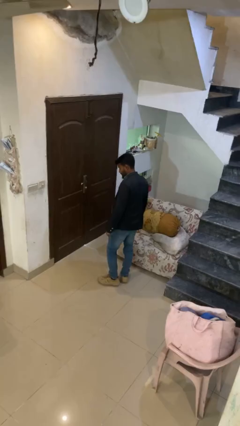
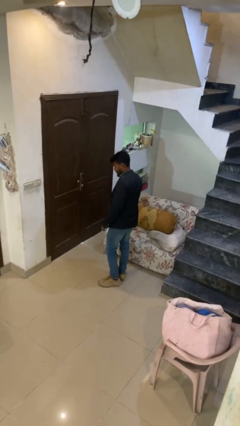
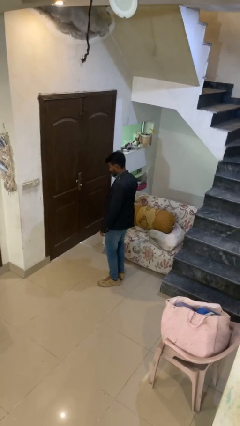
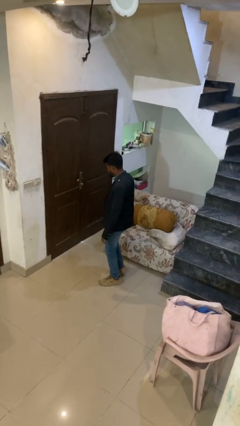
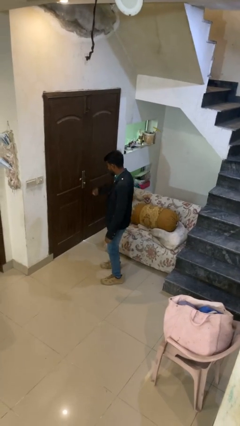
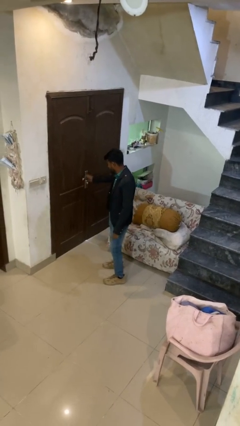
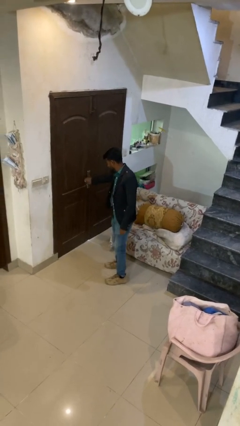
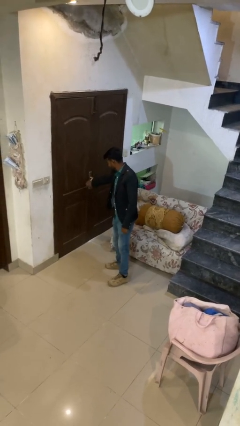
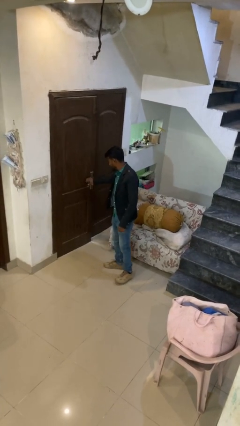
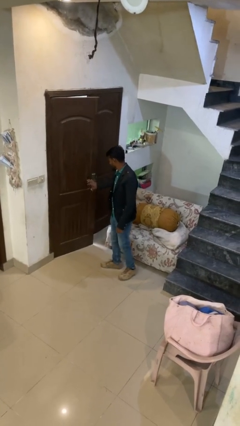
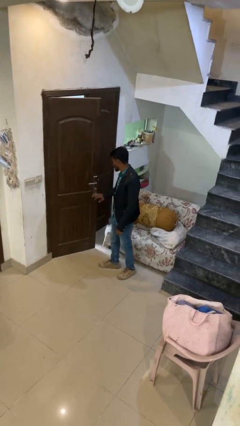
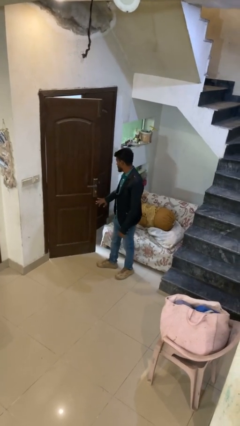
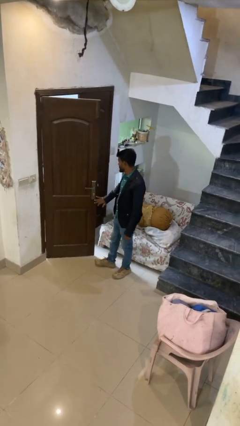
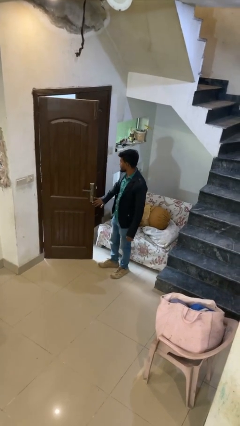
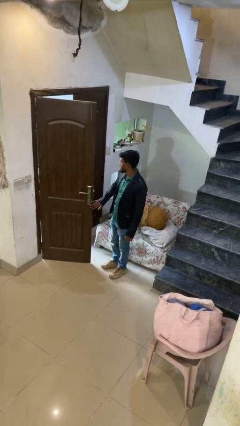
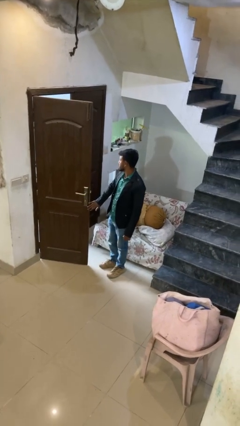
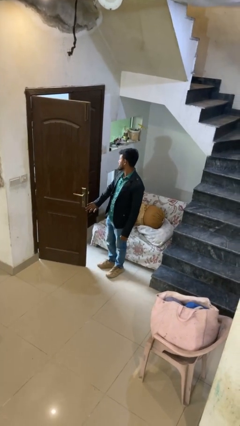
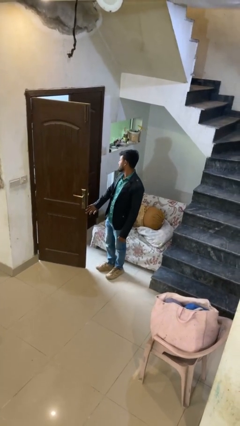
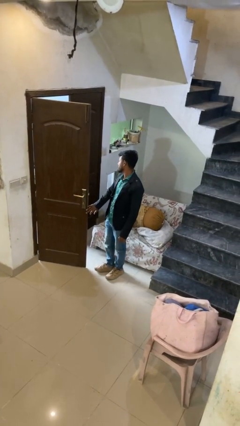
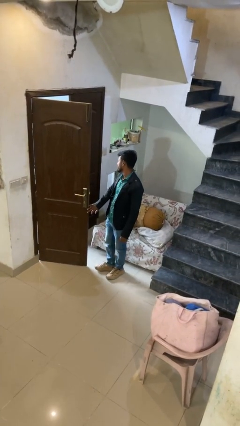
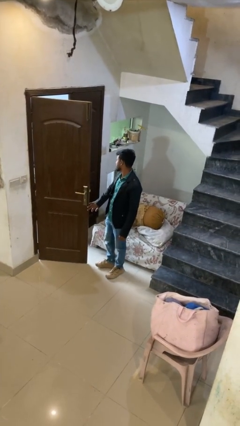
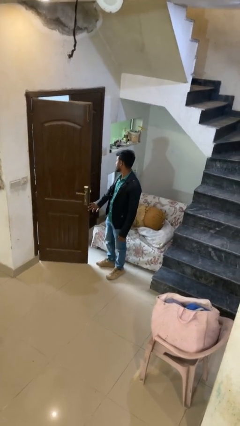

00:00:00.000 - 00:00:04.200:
person opens facility door

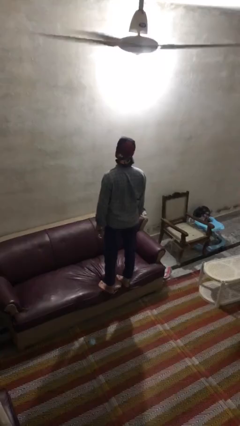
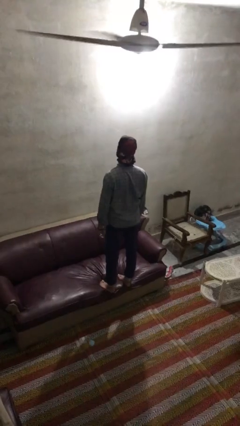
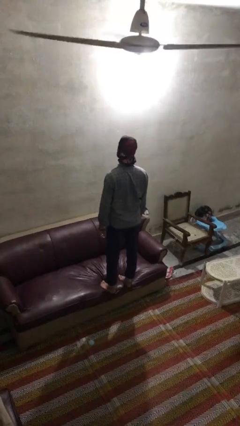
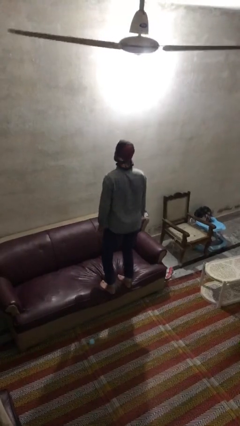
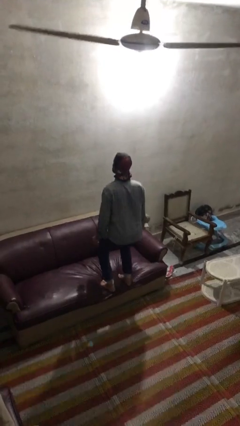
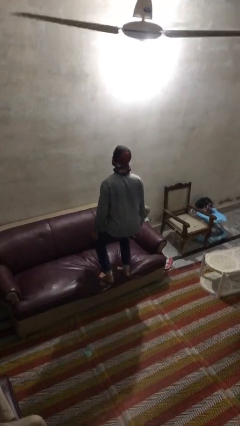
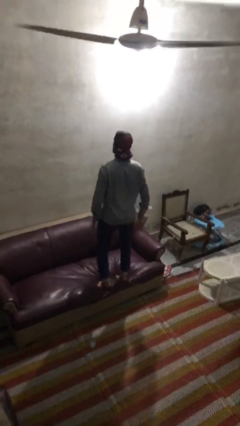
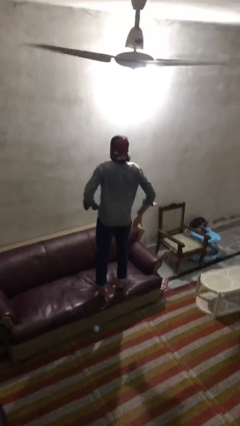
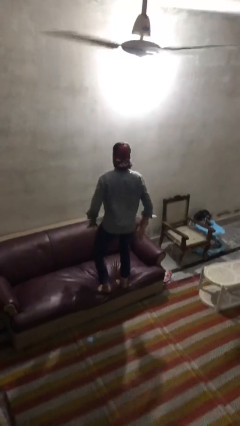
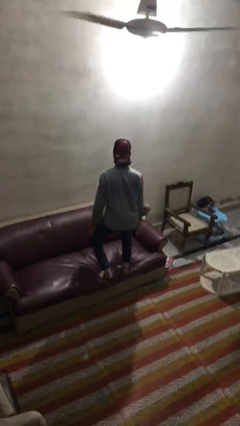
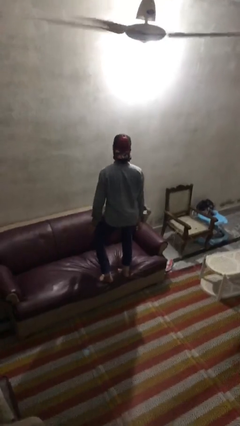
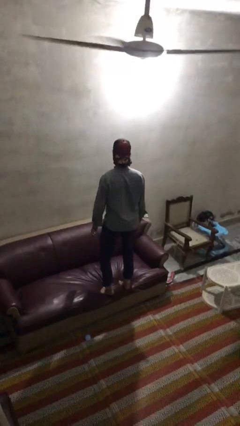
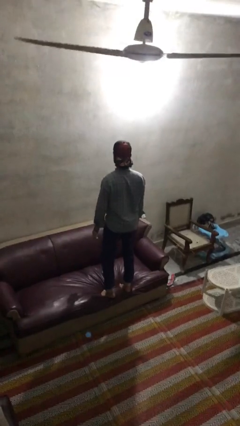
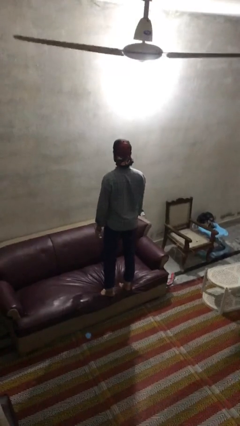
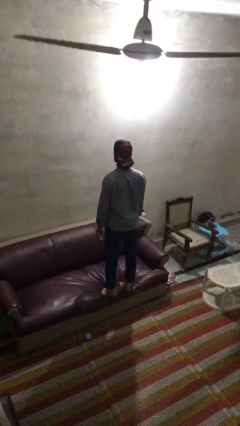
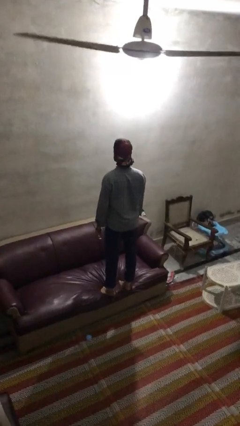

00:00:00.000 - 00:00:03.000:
person jumps on couch

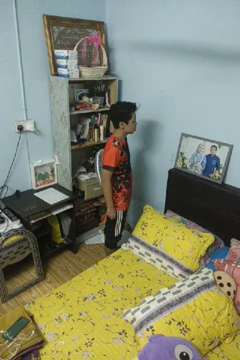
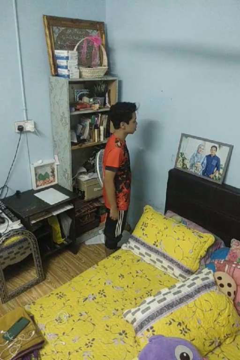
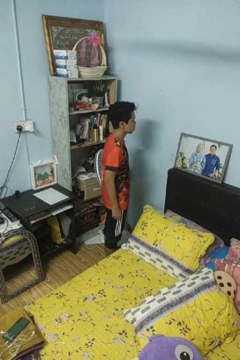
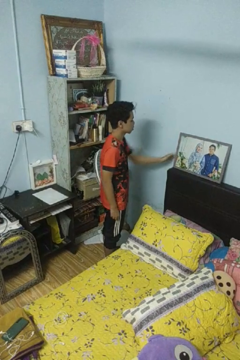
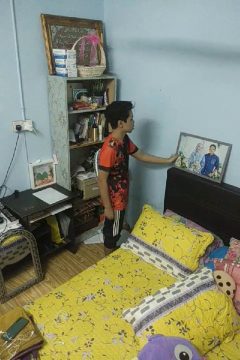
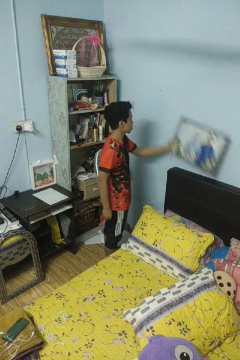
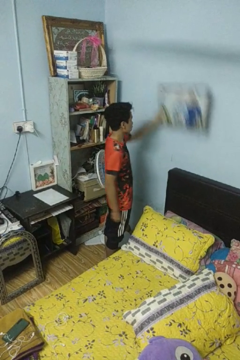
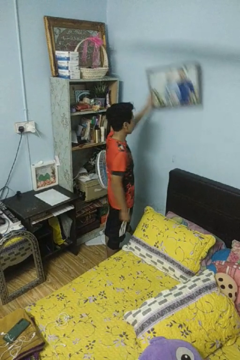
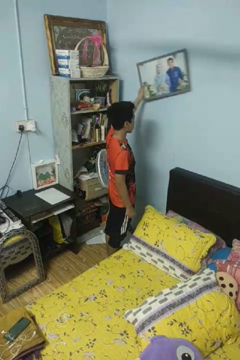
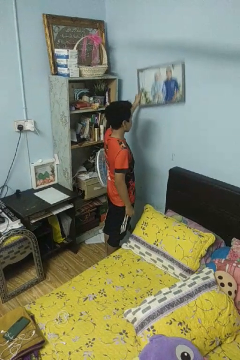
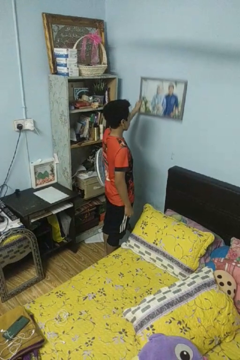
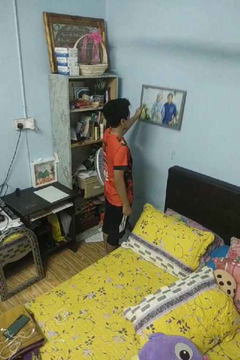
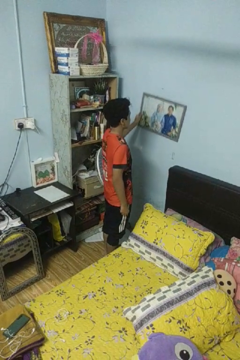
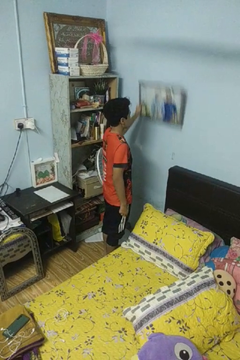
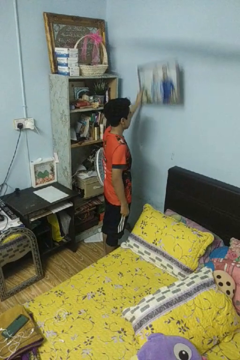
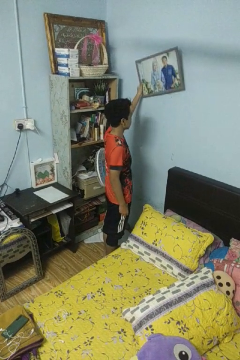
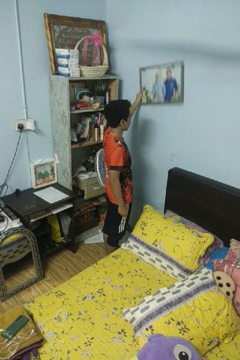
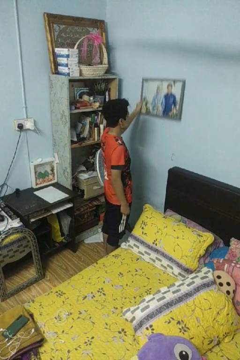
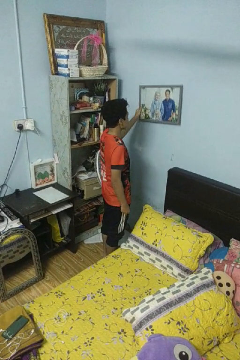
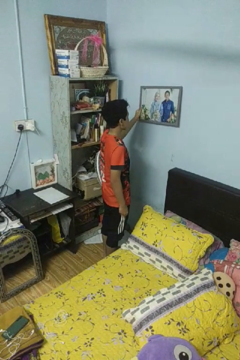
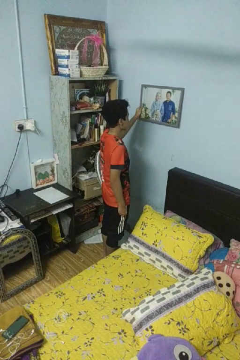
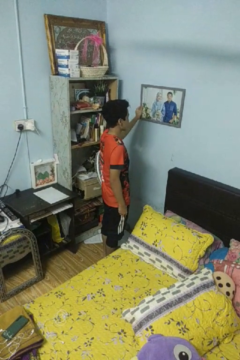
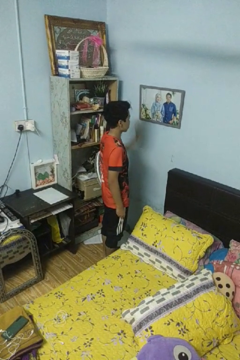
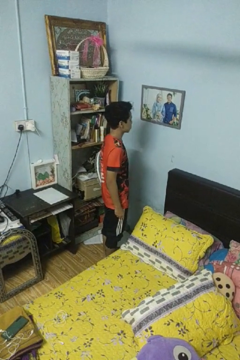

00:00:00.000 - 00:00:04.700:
person puts up picture frame

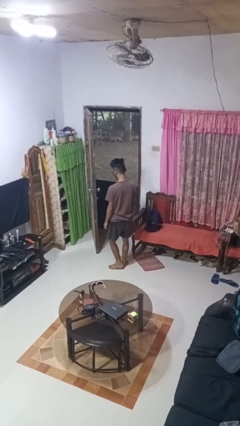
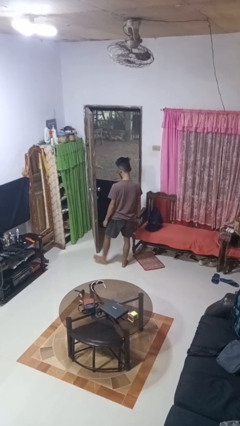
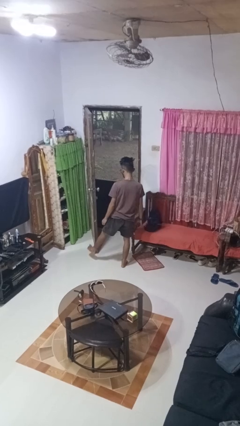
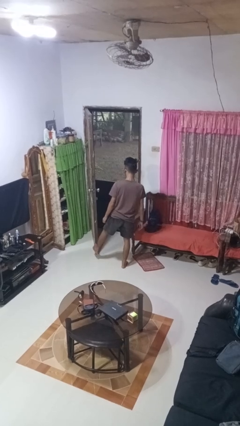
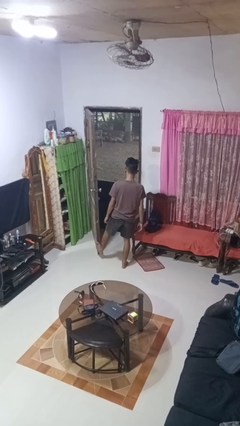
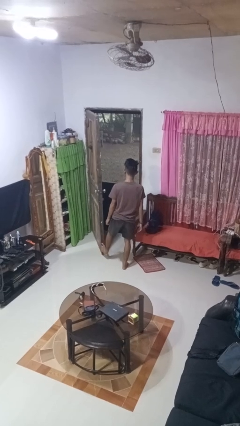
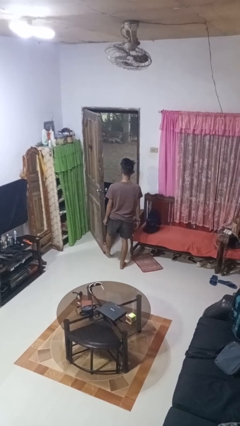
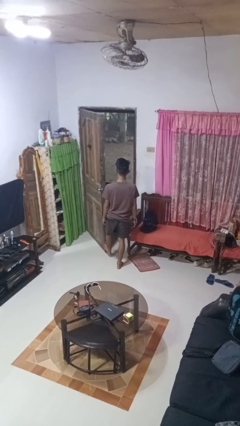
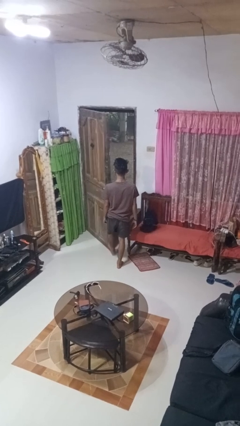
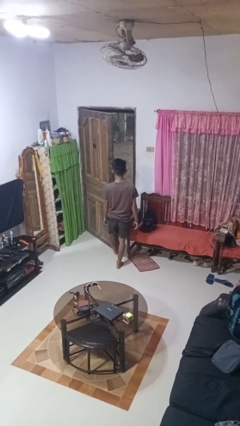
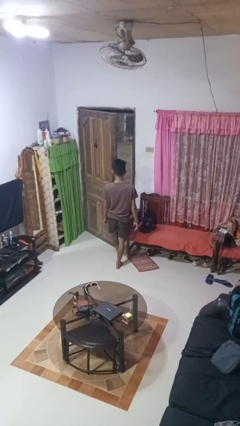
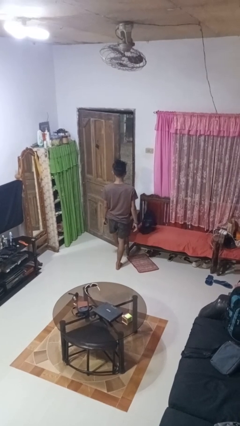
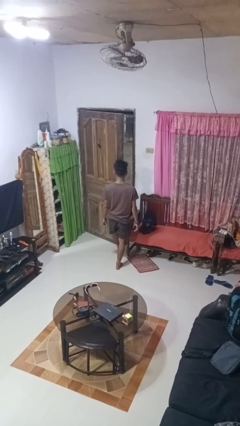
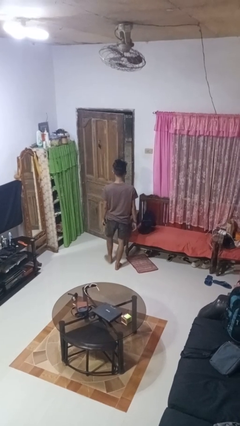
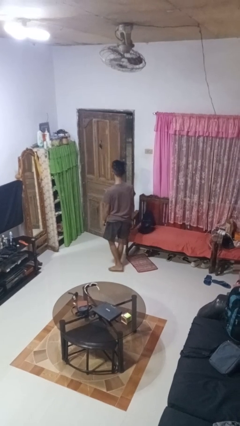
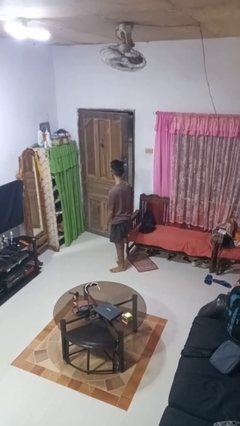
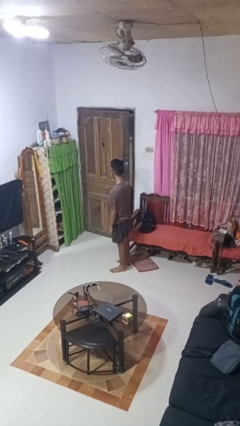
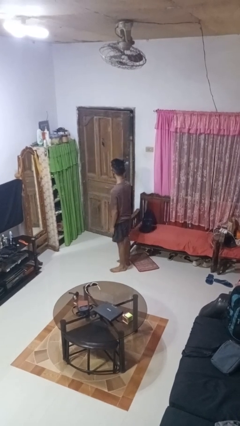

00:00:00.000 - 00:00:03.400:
person closes door with foot

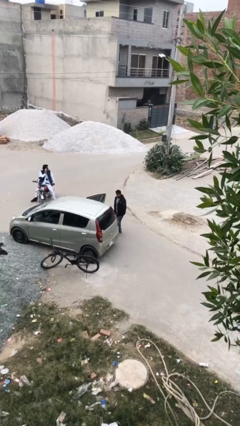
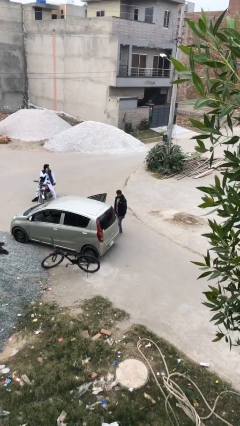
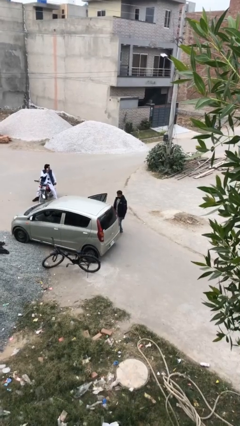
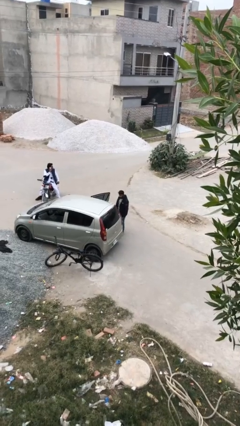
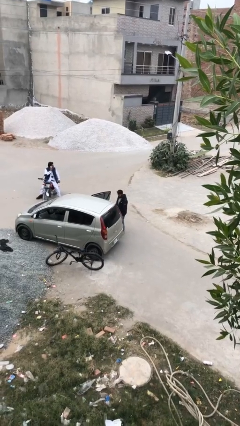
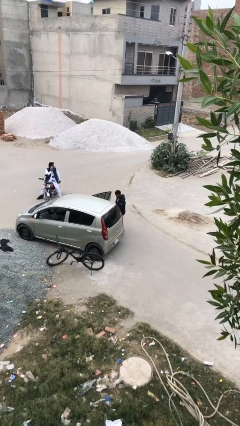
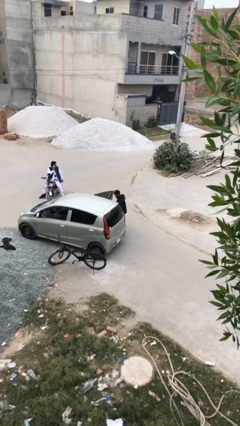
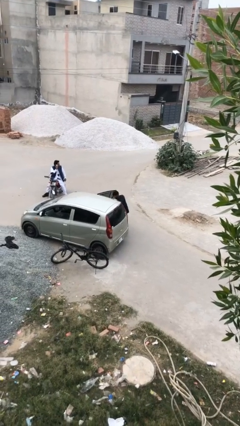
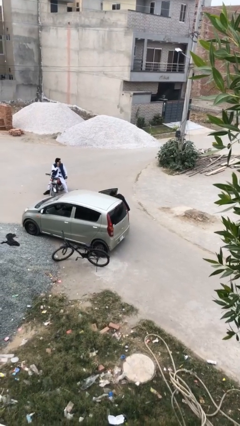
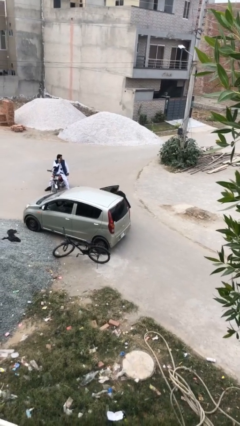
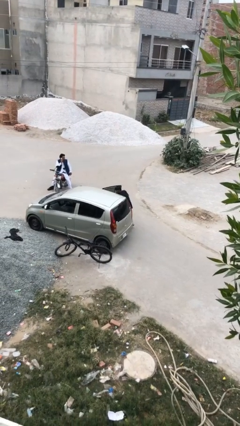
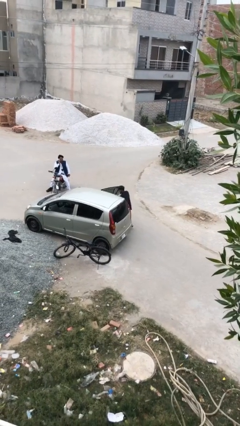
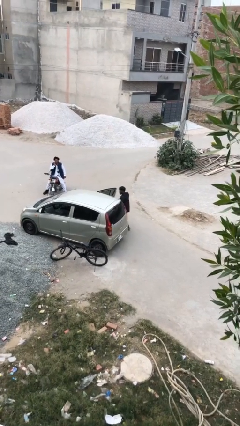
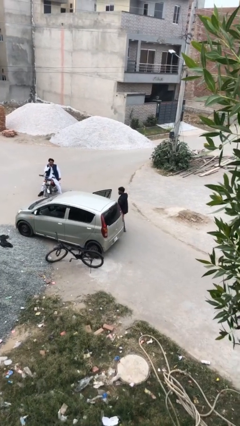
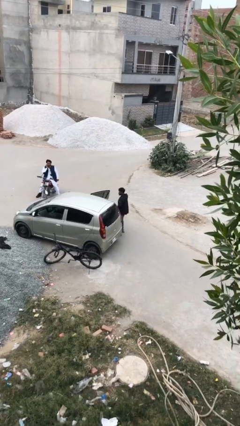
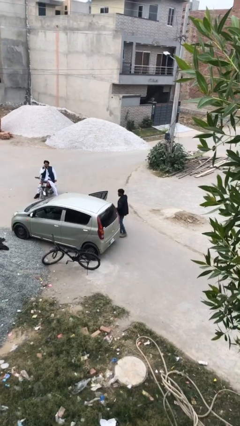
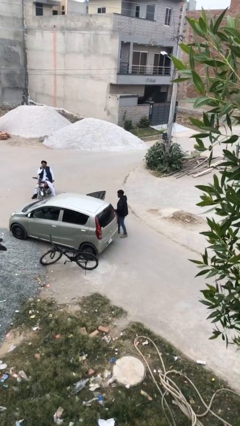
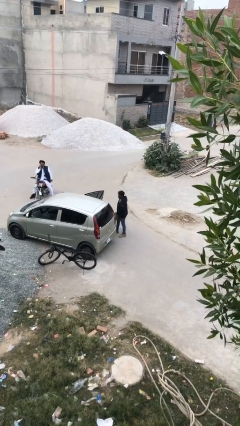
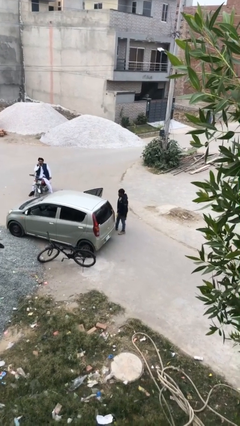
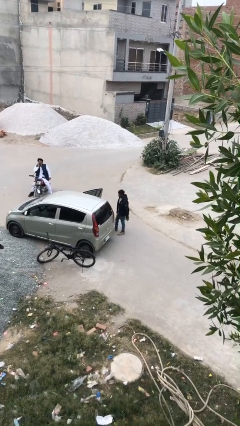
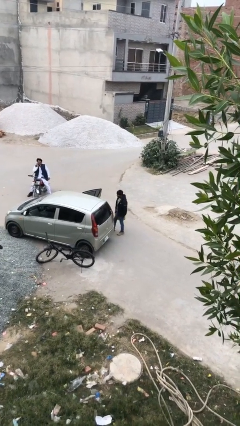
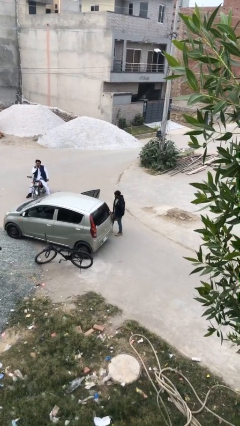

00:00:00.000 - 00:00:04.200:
person unloads car
